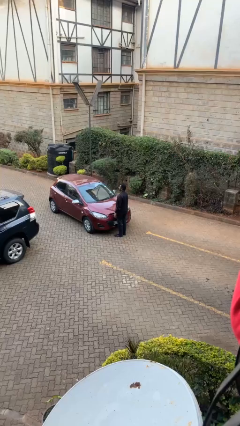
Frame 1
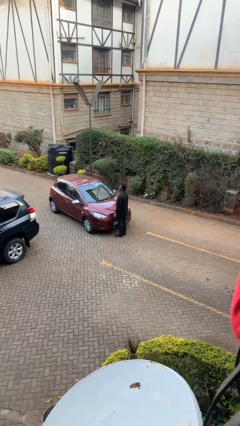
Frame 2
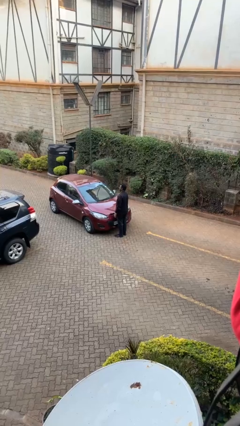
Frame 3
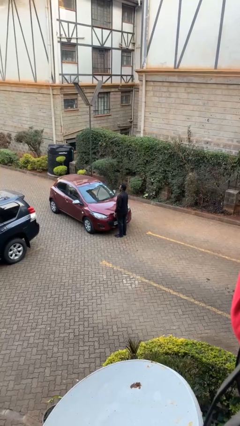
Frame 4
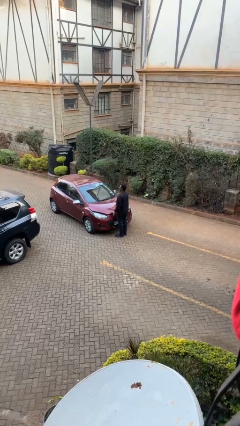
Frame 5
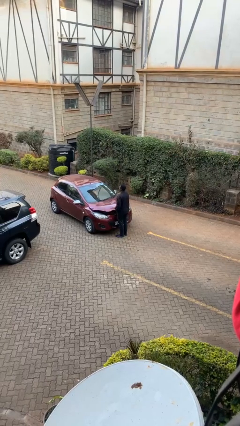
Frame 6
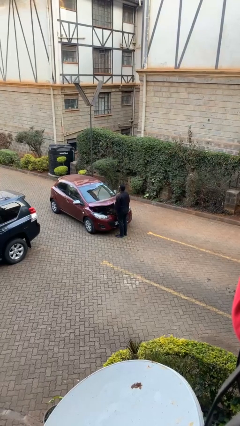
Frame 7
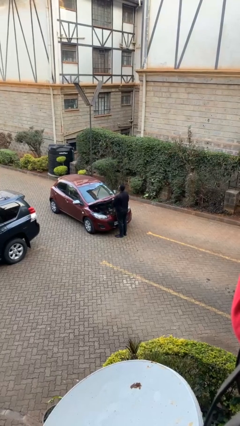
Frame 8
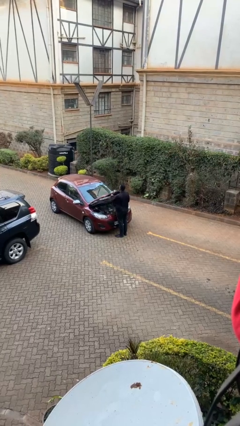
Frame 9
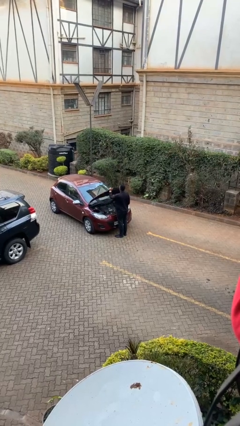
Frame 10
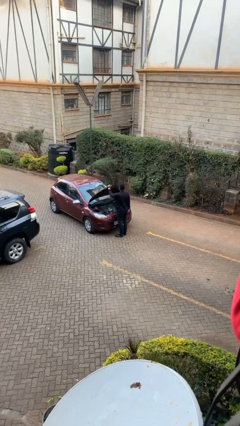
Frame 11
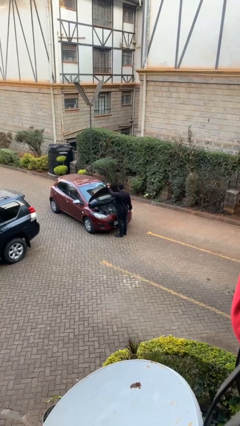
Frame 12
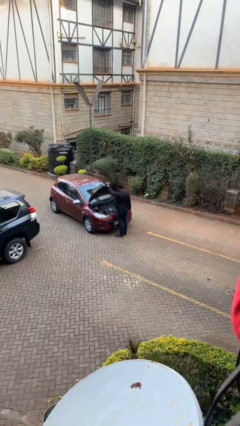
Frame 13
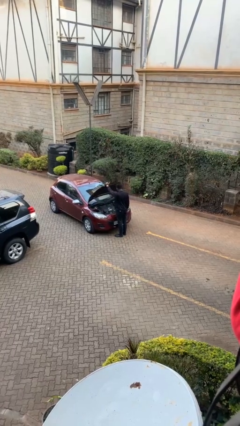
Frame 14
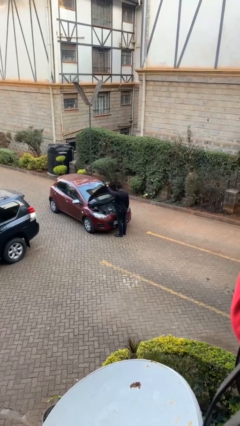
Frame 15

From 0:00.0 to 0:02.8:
person opens car hood

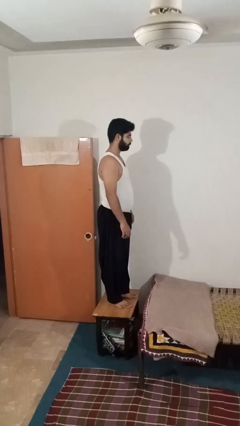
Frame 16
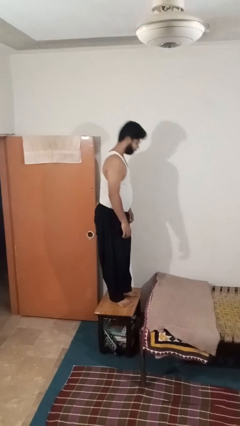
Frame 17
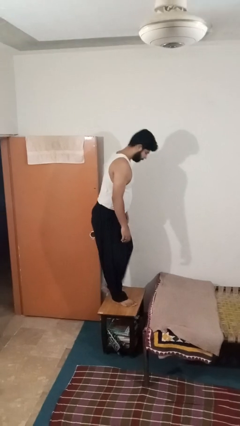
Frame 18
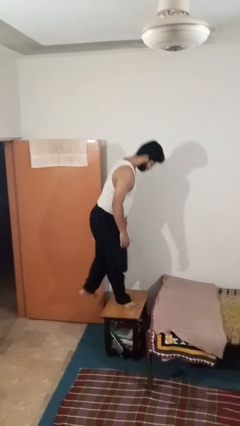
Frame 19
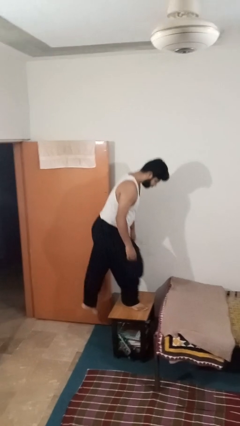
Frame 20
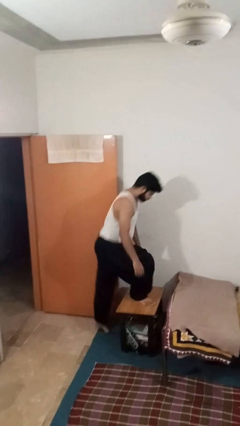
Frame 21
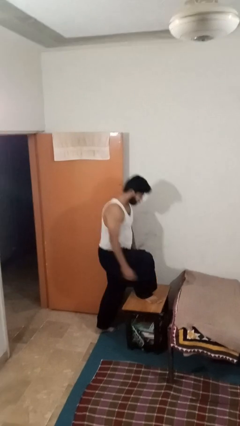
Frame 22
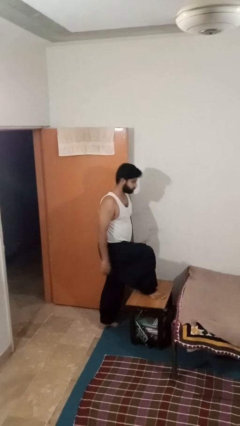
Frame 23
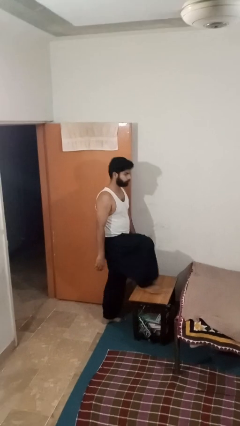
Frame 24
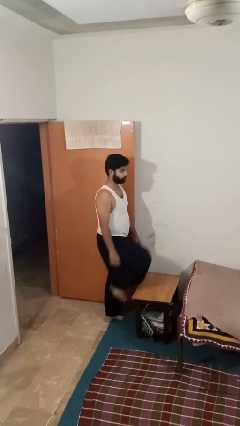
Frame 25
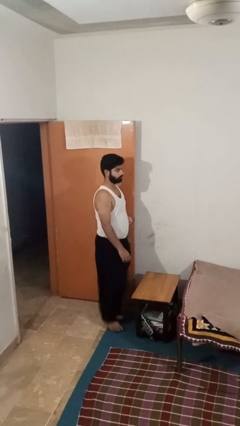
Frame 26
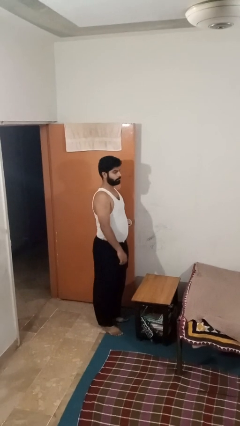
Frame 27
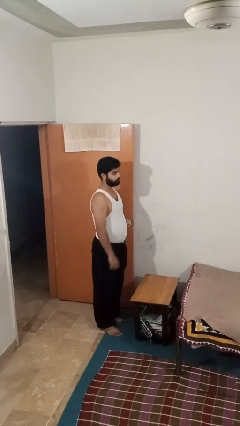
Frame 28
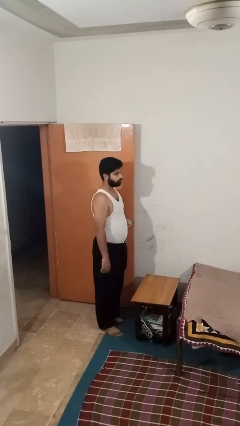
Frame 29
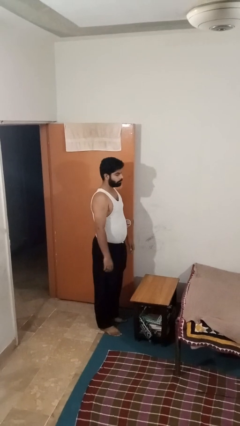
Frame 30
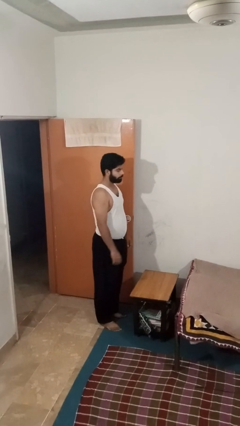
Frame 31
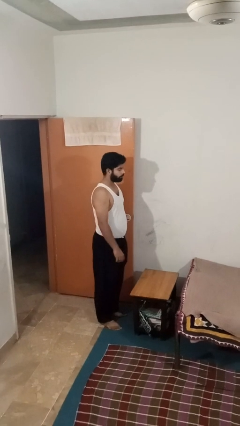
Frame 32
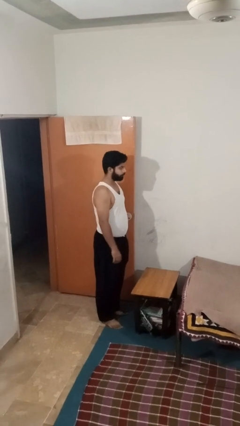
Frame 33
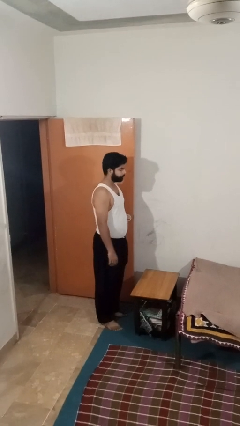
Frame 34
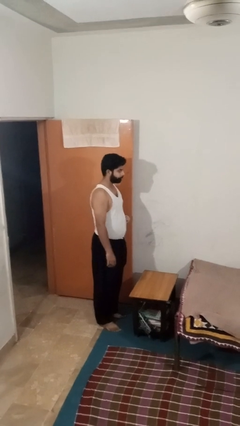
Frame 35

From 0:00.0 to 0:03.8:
person climbs off table

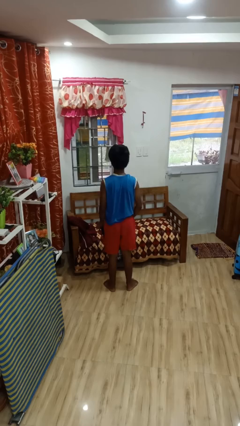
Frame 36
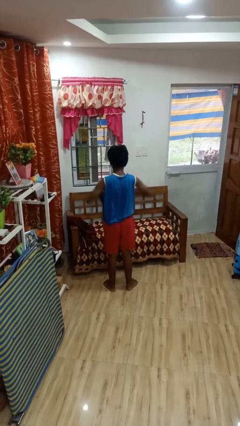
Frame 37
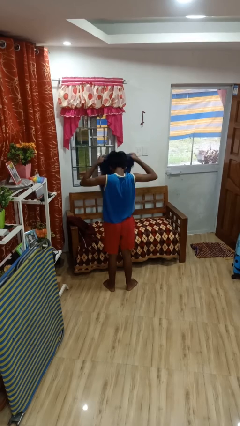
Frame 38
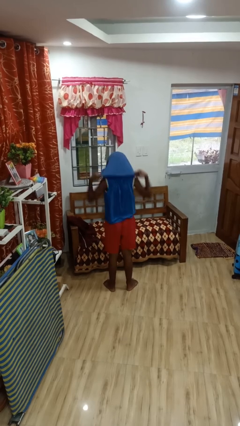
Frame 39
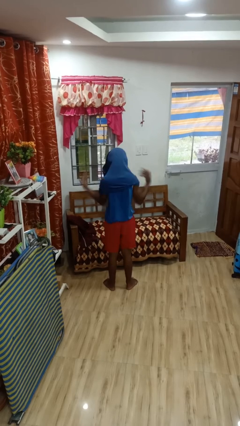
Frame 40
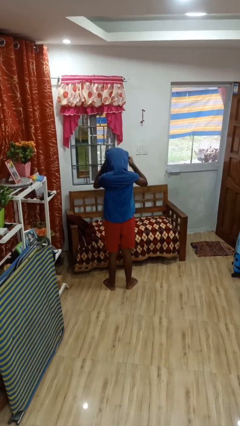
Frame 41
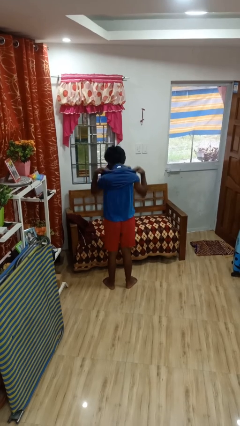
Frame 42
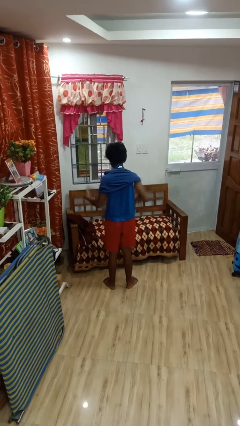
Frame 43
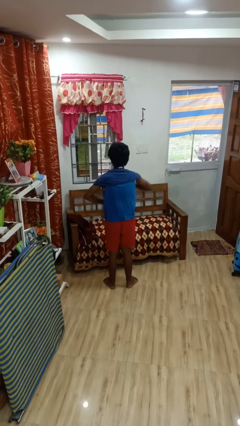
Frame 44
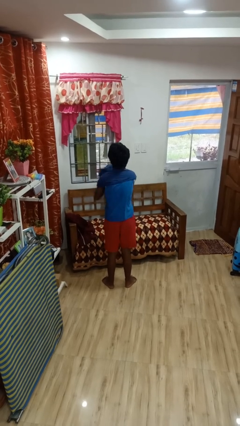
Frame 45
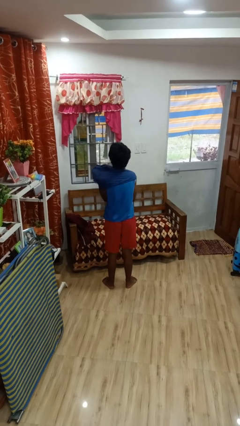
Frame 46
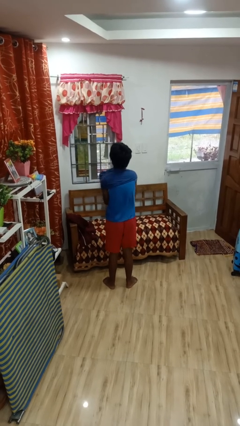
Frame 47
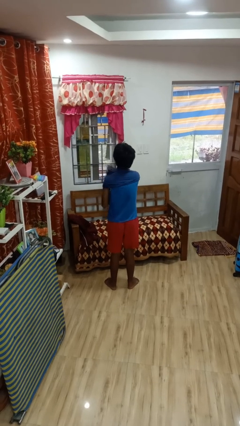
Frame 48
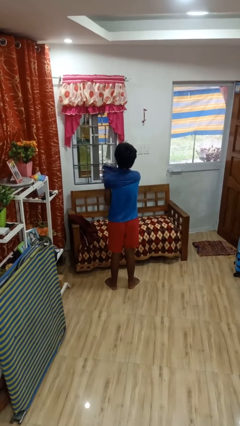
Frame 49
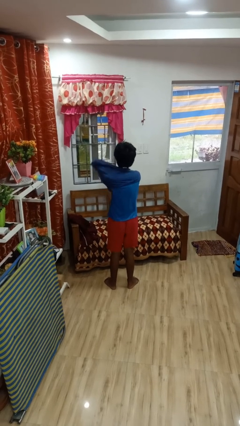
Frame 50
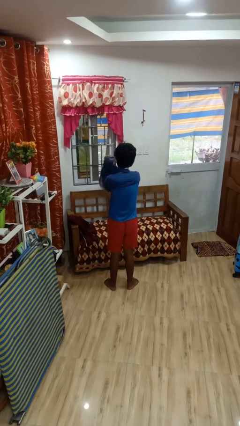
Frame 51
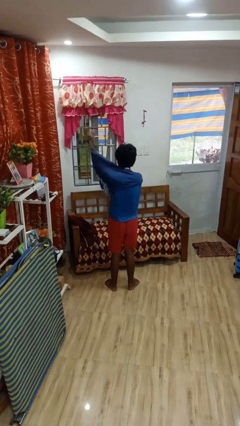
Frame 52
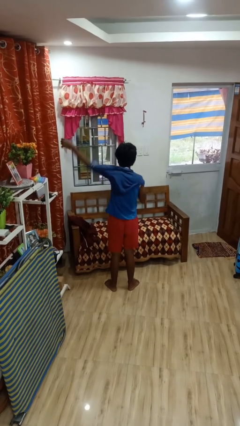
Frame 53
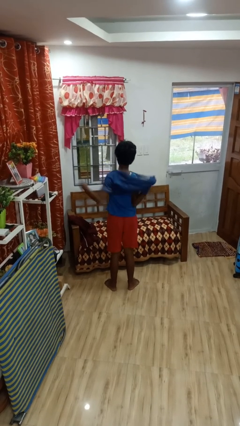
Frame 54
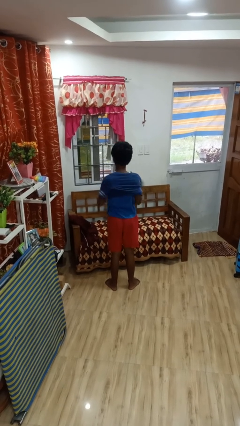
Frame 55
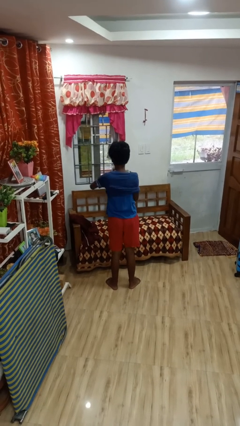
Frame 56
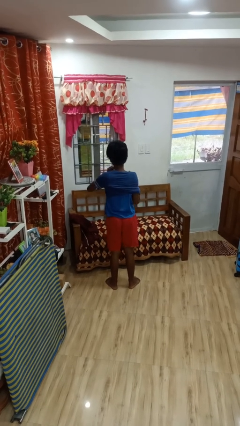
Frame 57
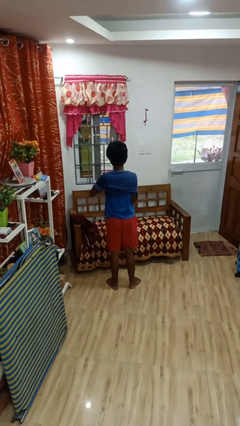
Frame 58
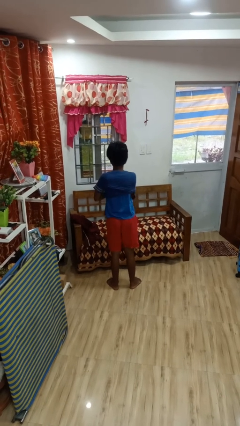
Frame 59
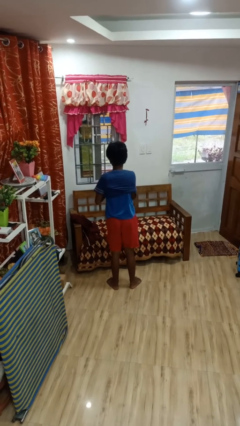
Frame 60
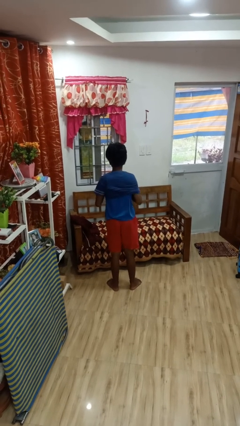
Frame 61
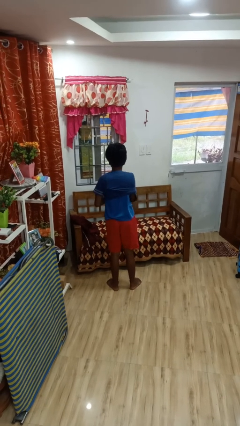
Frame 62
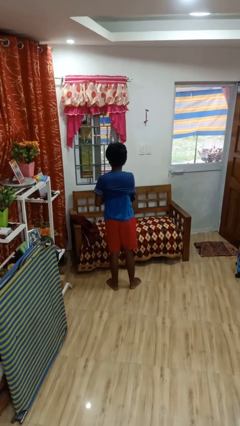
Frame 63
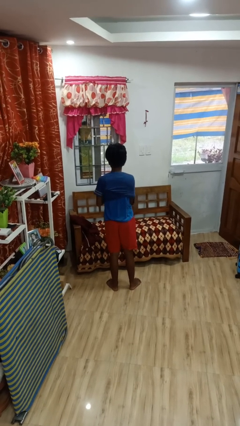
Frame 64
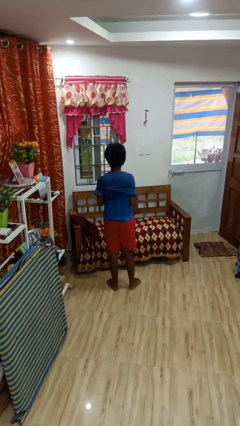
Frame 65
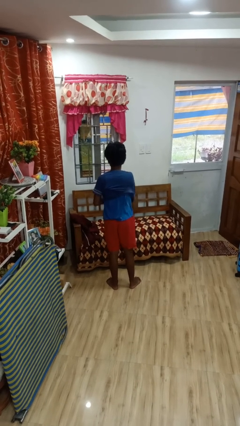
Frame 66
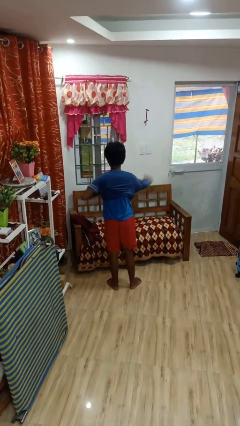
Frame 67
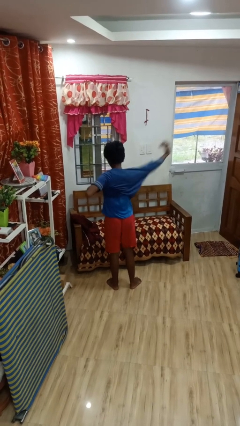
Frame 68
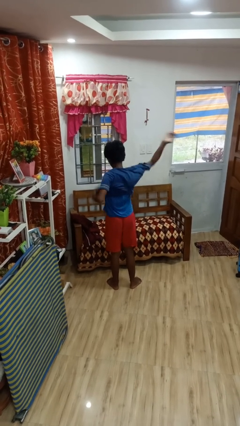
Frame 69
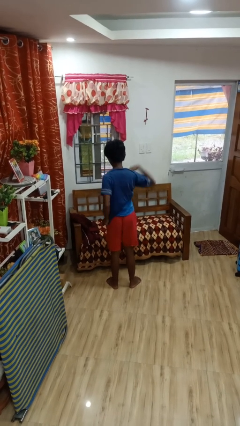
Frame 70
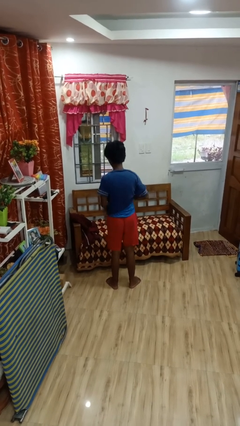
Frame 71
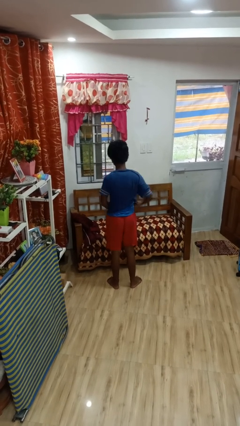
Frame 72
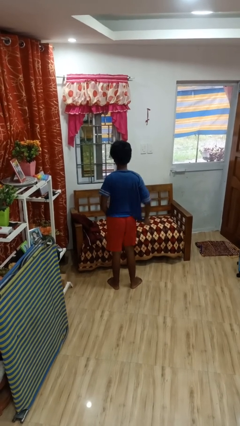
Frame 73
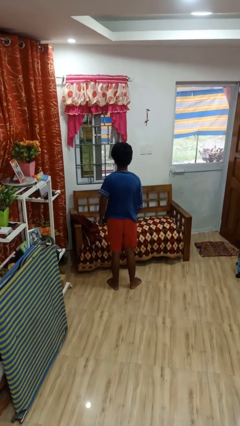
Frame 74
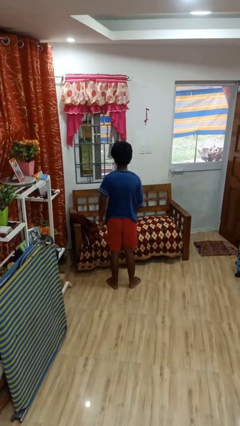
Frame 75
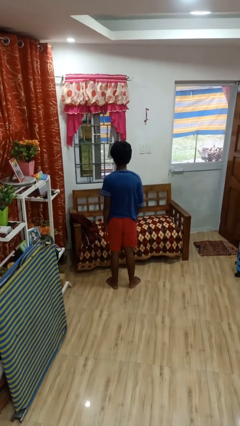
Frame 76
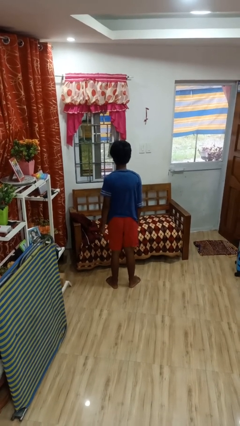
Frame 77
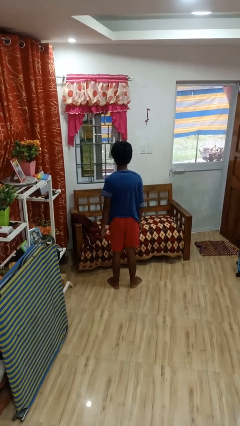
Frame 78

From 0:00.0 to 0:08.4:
person puts on shirt

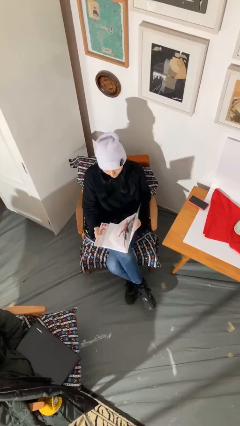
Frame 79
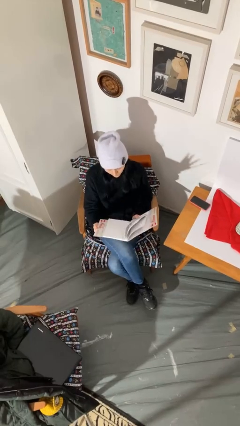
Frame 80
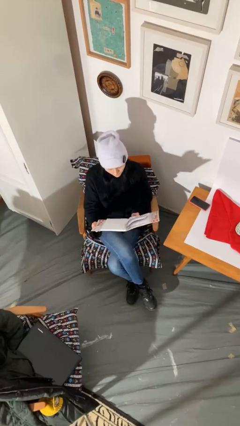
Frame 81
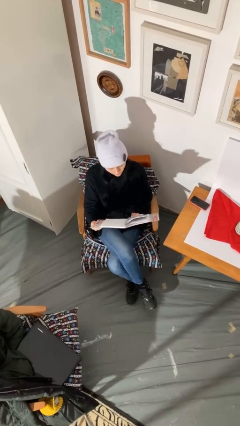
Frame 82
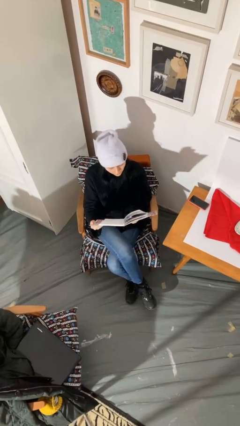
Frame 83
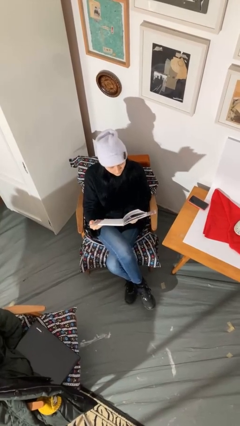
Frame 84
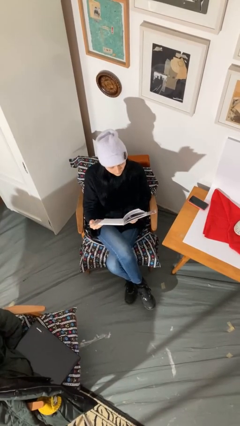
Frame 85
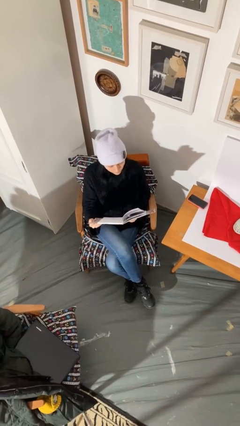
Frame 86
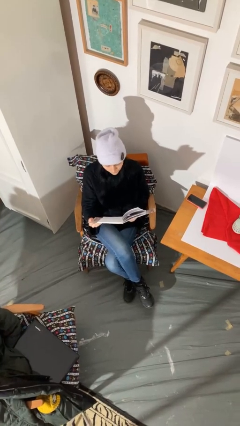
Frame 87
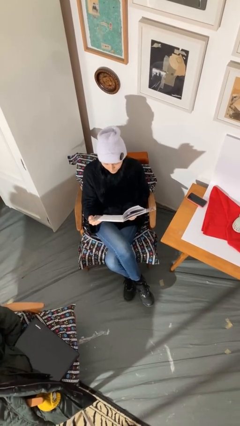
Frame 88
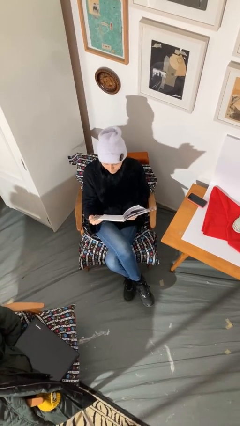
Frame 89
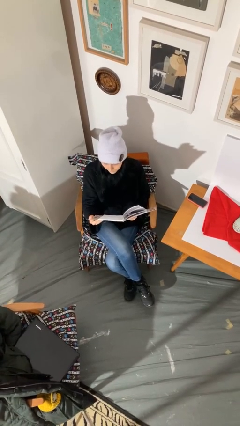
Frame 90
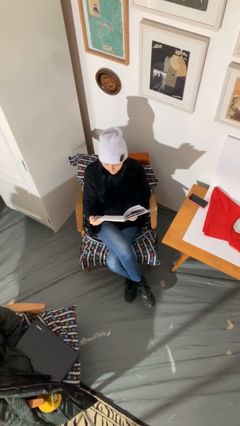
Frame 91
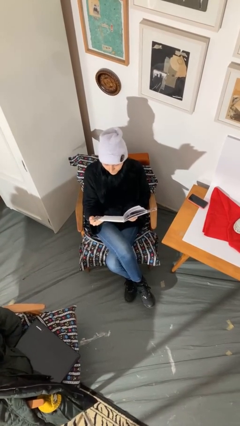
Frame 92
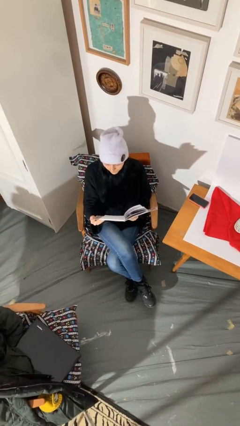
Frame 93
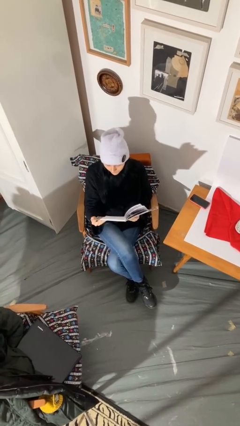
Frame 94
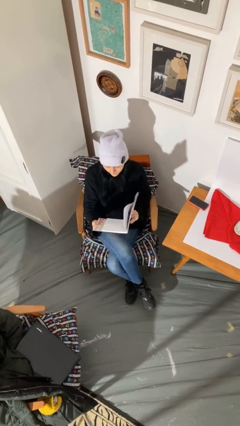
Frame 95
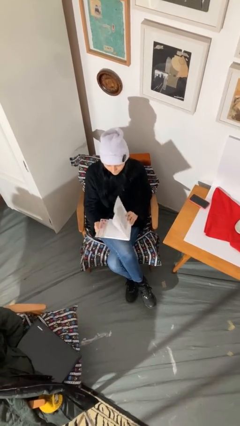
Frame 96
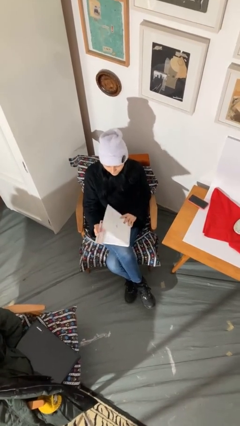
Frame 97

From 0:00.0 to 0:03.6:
person reads document
